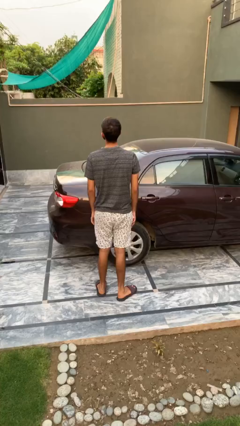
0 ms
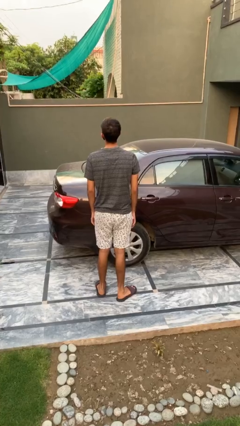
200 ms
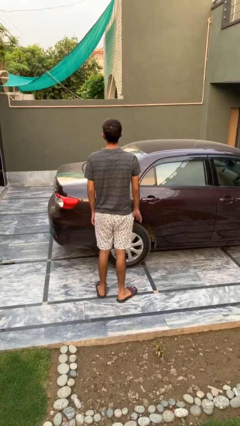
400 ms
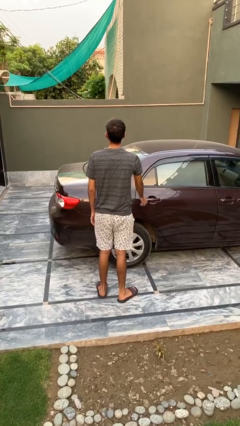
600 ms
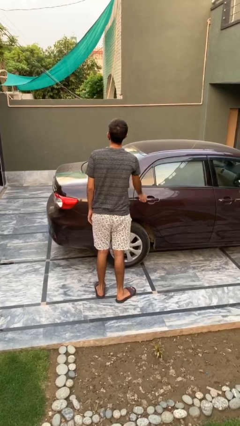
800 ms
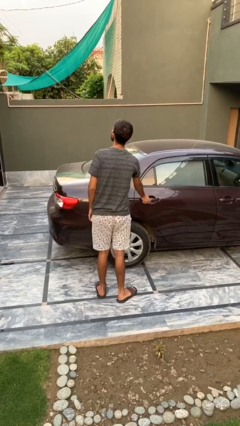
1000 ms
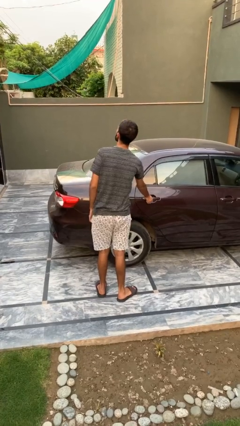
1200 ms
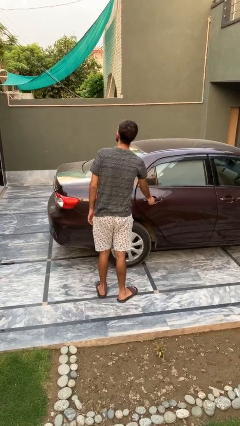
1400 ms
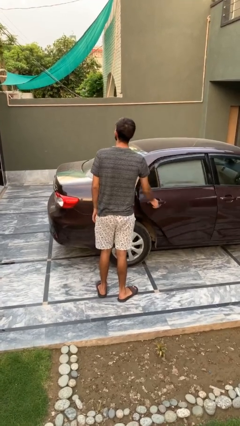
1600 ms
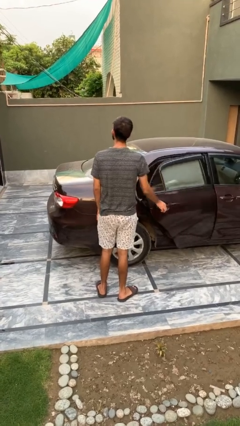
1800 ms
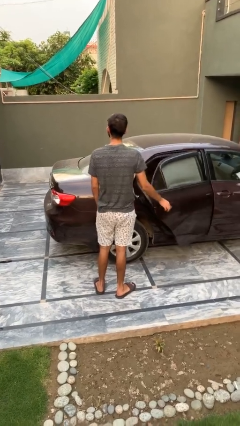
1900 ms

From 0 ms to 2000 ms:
person opens car door

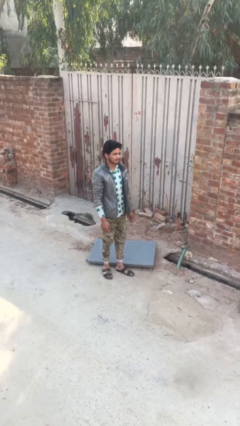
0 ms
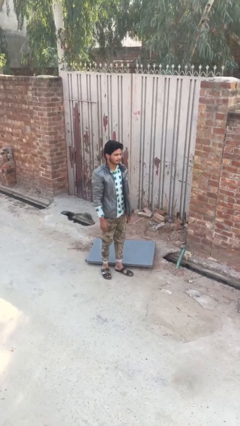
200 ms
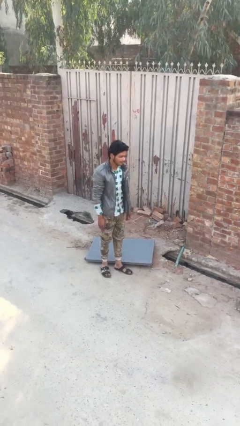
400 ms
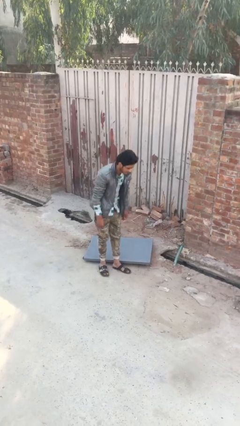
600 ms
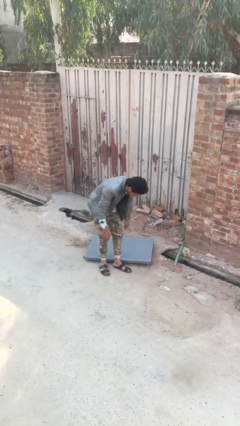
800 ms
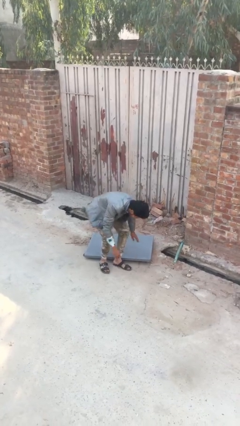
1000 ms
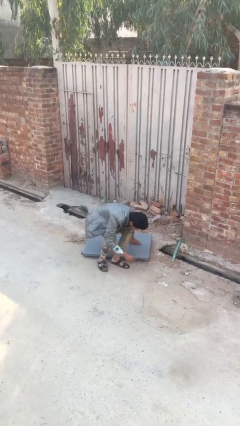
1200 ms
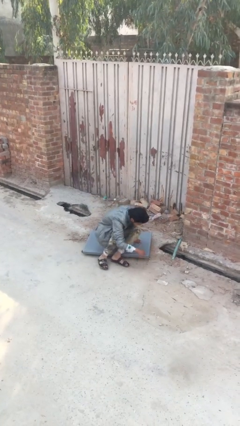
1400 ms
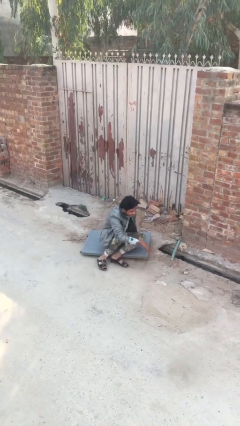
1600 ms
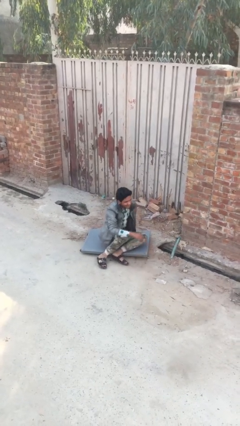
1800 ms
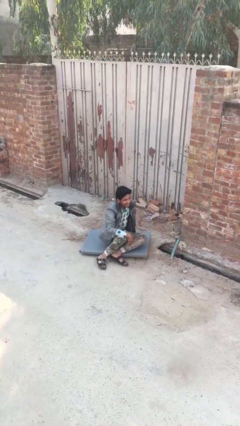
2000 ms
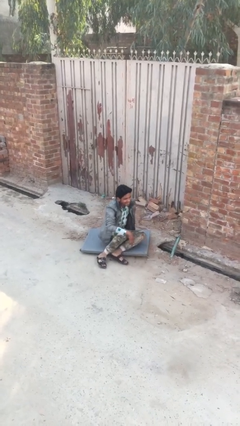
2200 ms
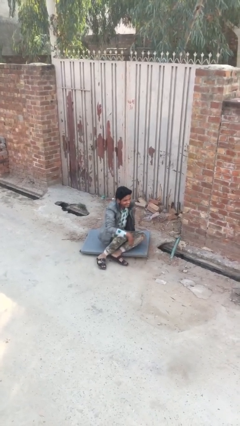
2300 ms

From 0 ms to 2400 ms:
person sits down

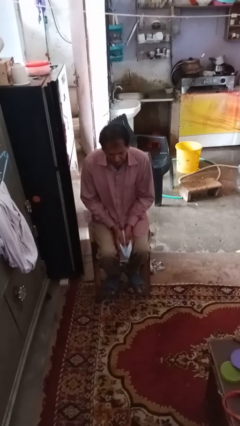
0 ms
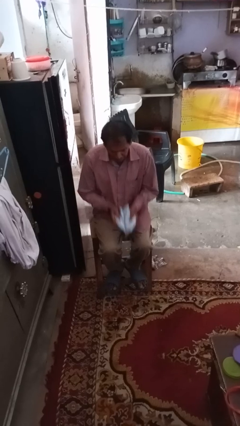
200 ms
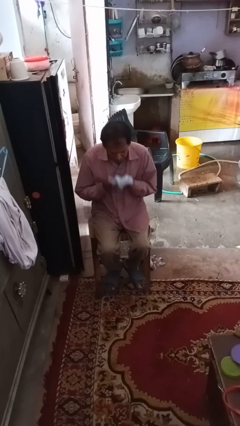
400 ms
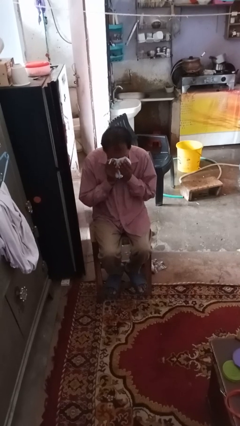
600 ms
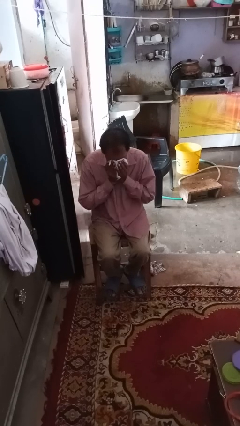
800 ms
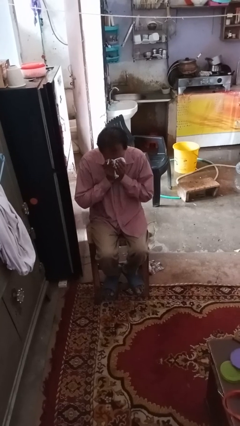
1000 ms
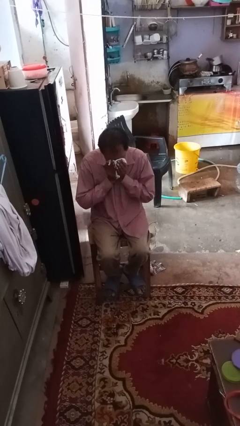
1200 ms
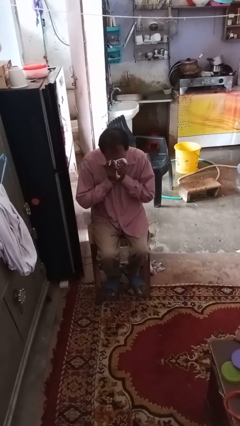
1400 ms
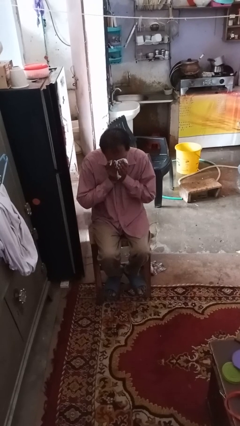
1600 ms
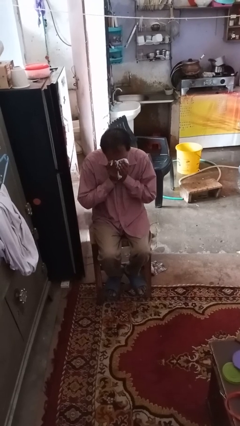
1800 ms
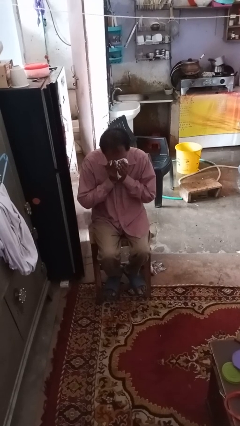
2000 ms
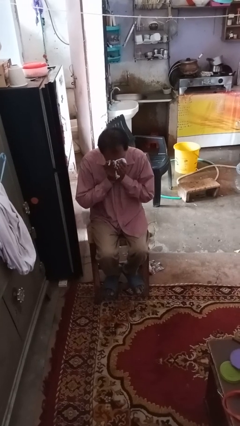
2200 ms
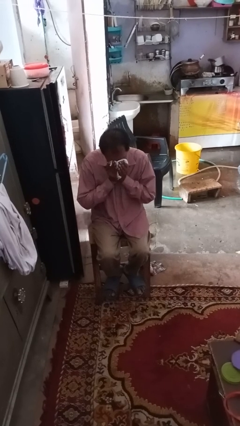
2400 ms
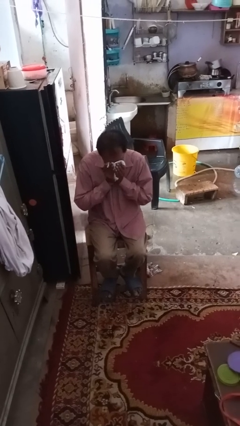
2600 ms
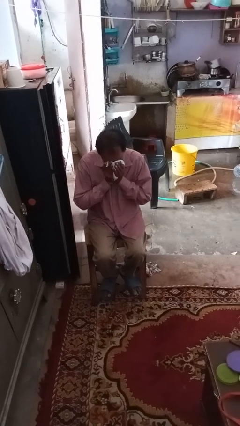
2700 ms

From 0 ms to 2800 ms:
person blows nose

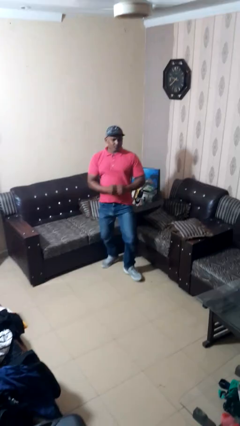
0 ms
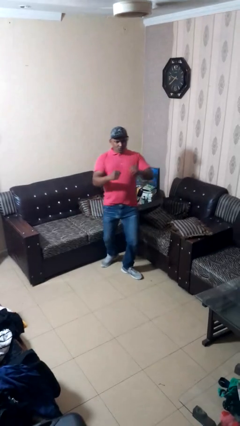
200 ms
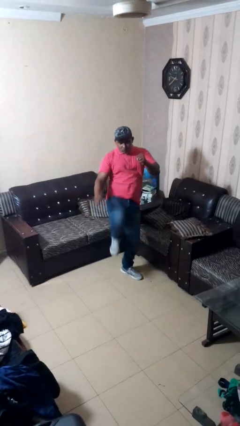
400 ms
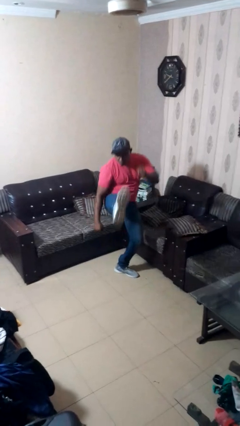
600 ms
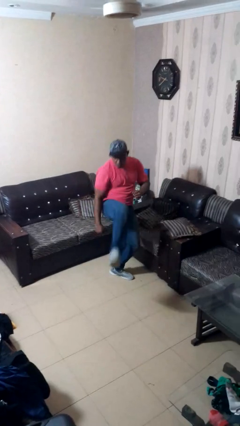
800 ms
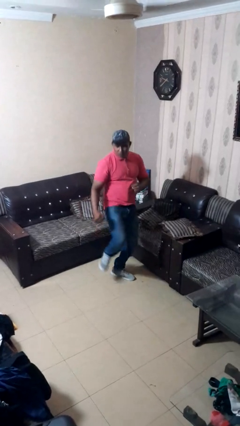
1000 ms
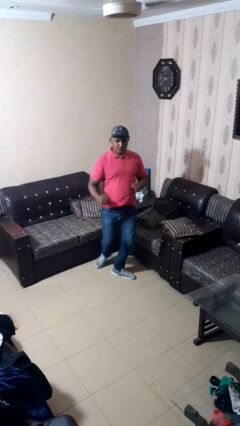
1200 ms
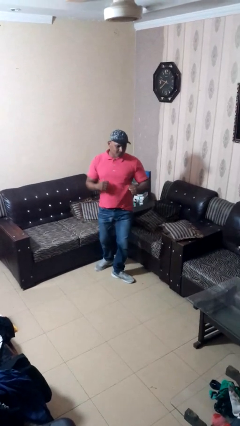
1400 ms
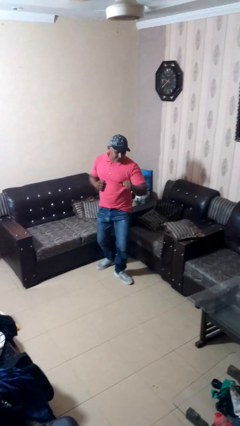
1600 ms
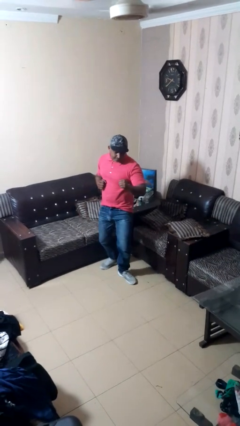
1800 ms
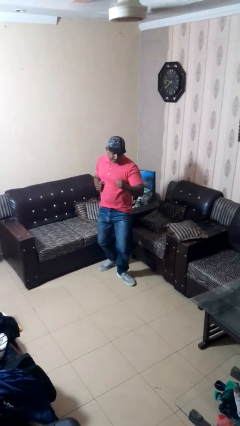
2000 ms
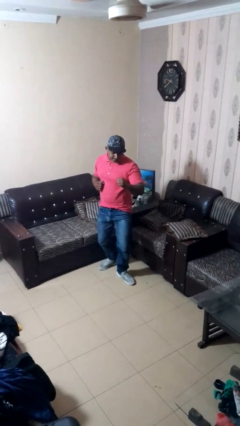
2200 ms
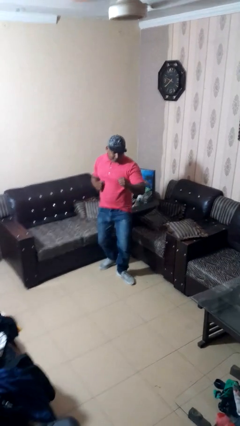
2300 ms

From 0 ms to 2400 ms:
person karate kicks

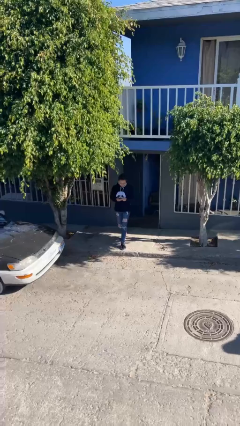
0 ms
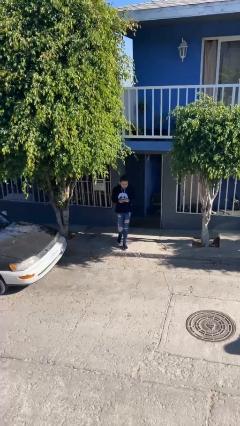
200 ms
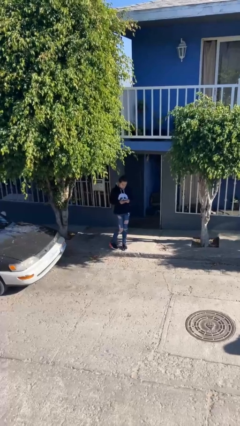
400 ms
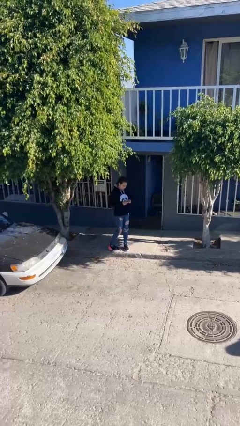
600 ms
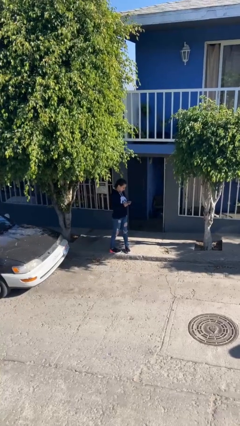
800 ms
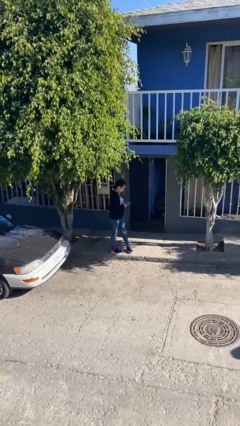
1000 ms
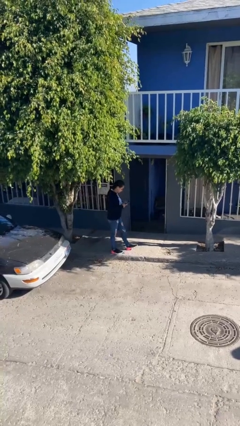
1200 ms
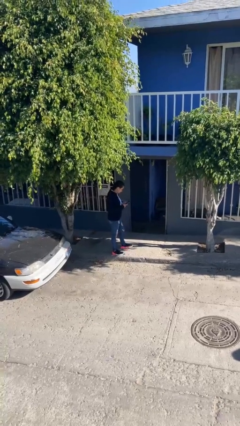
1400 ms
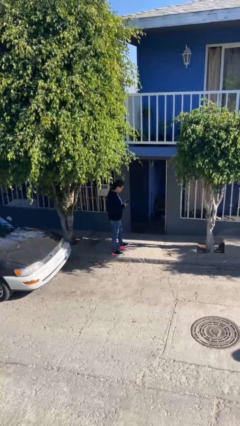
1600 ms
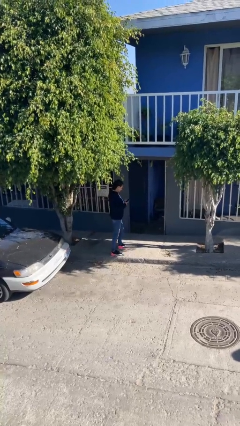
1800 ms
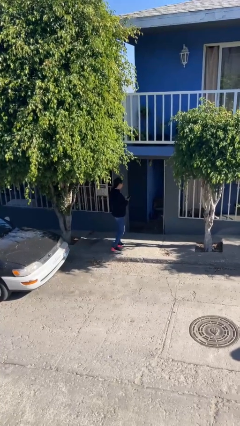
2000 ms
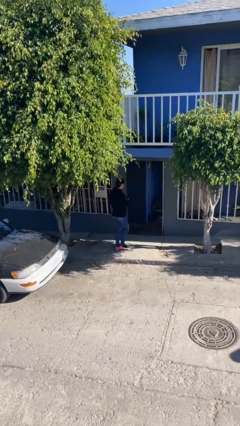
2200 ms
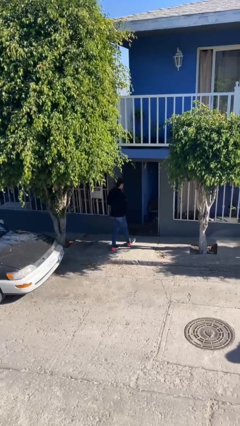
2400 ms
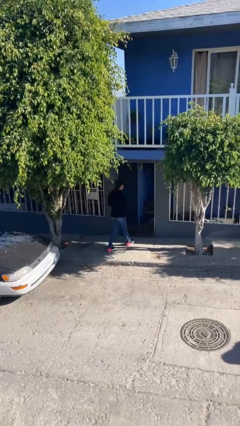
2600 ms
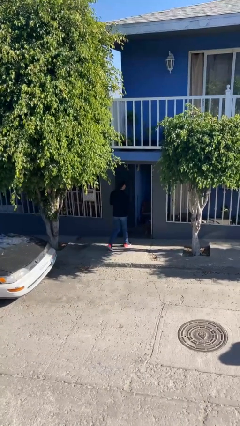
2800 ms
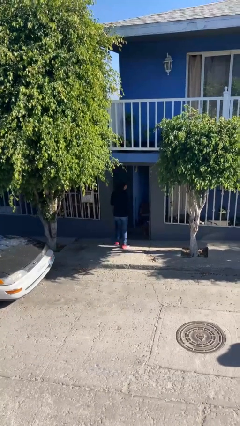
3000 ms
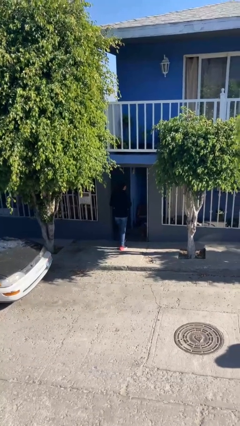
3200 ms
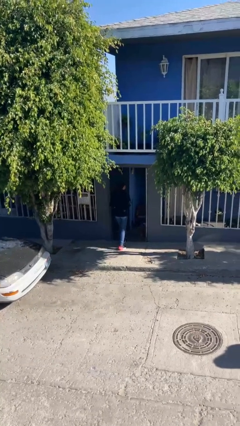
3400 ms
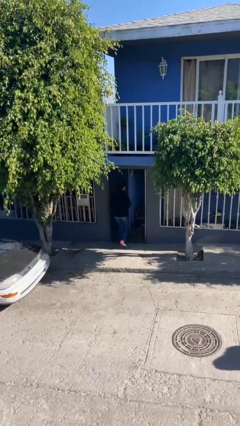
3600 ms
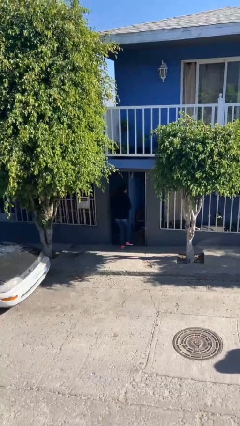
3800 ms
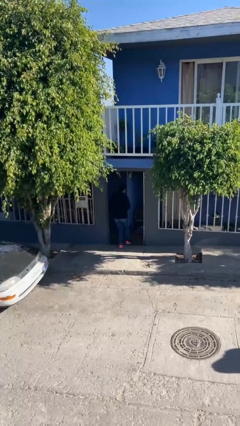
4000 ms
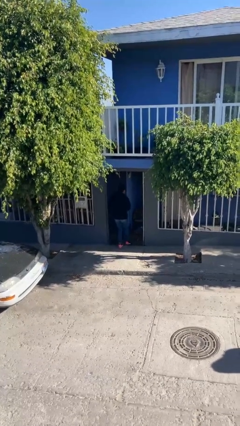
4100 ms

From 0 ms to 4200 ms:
person exits scene through structure

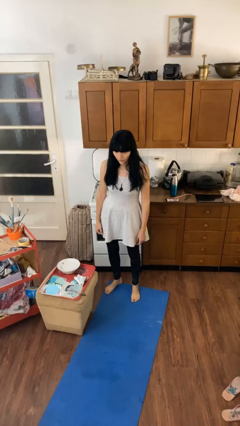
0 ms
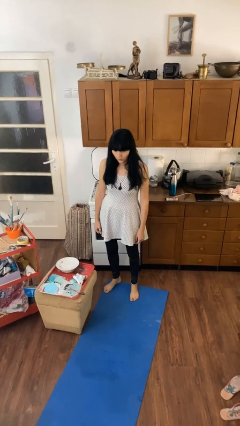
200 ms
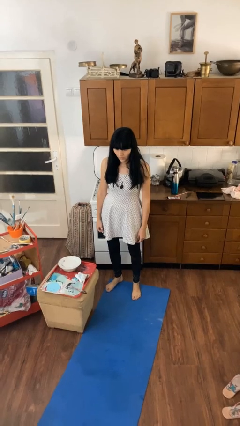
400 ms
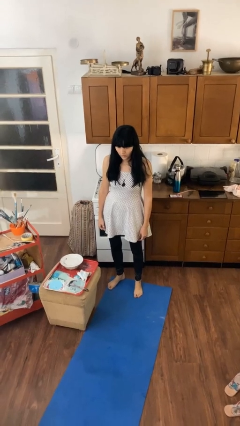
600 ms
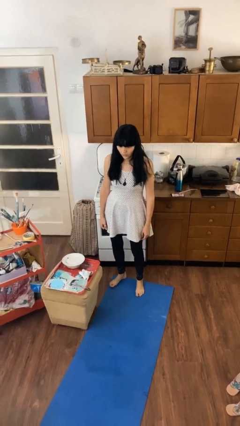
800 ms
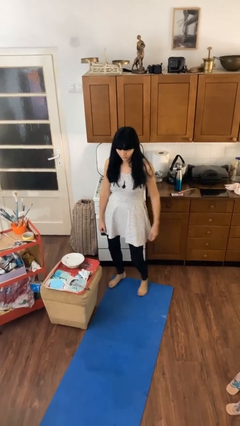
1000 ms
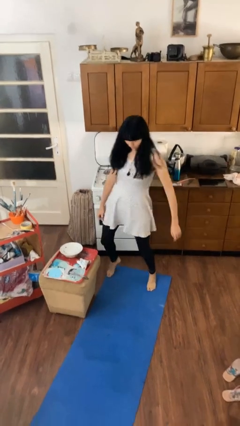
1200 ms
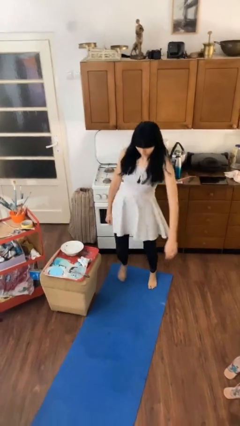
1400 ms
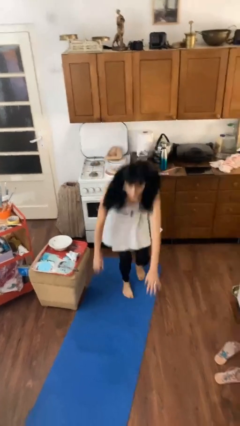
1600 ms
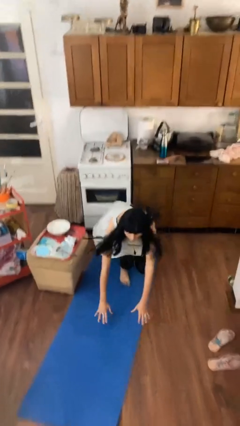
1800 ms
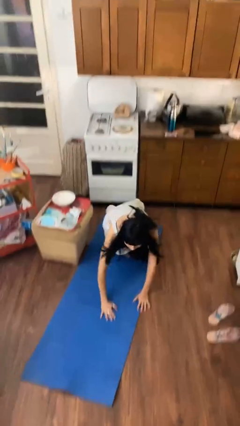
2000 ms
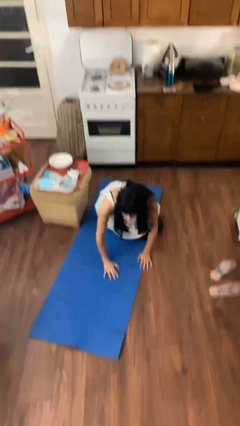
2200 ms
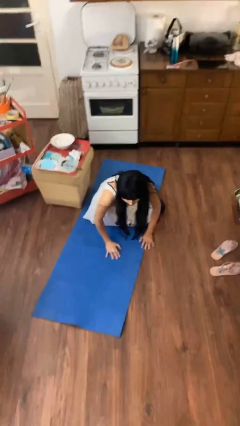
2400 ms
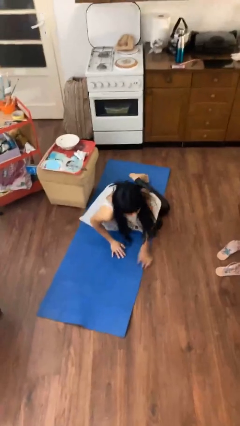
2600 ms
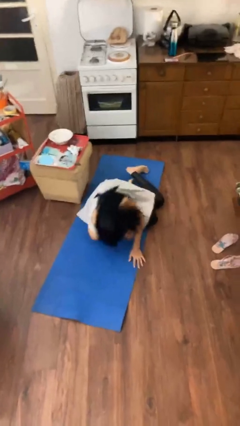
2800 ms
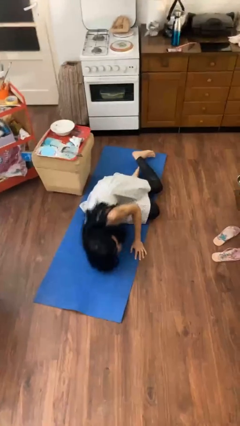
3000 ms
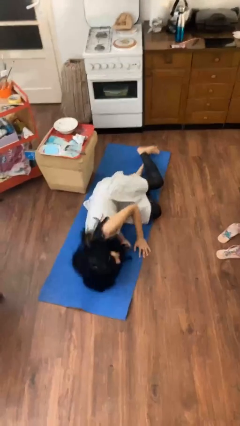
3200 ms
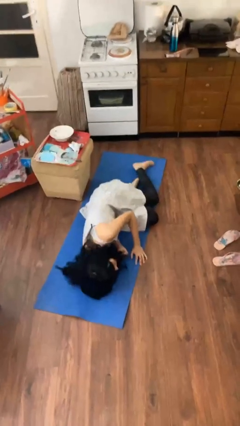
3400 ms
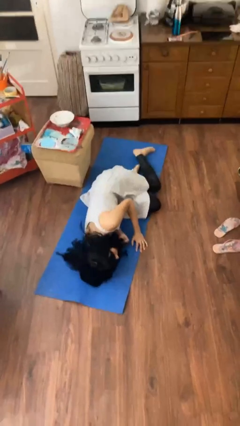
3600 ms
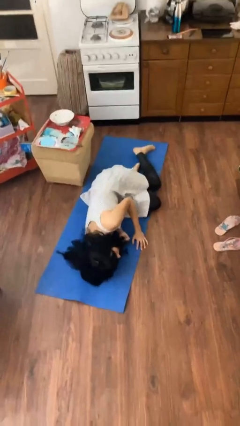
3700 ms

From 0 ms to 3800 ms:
person trips on object on floor
